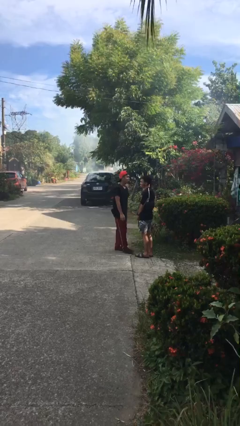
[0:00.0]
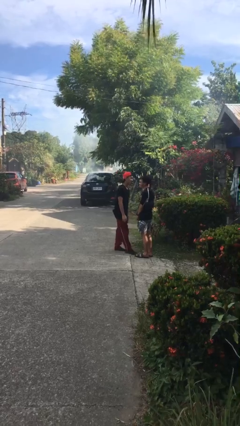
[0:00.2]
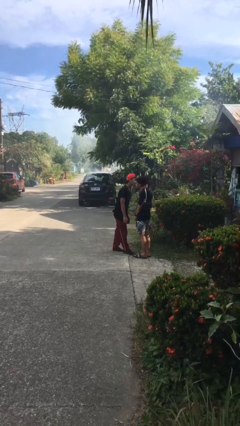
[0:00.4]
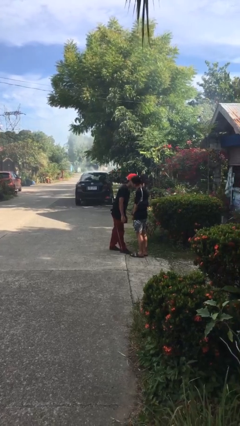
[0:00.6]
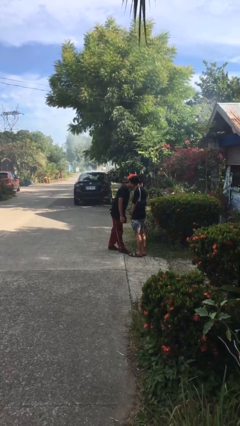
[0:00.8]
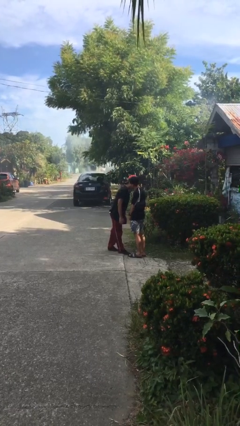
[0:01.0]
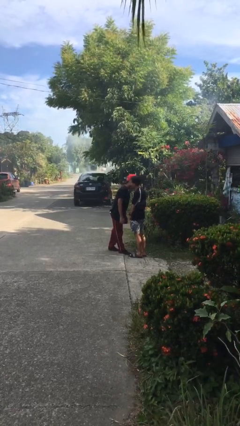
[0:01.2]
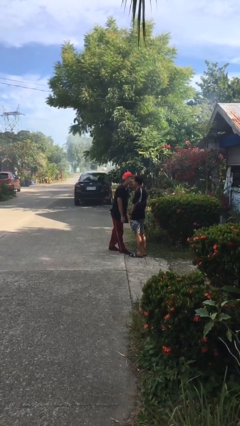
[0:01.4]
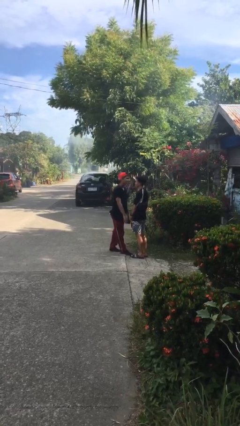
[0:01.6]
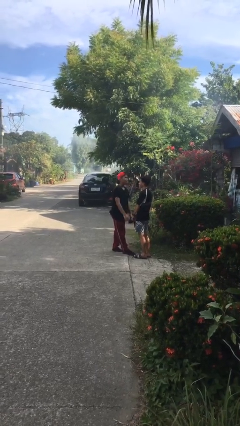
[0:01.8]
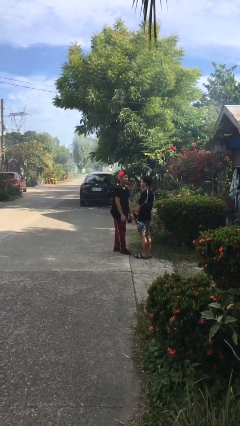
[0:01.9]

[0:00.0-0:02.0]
person kisses cheek of person

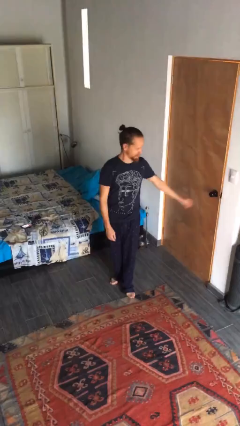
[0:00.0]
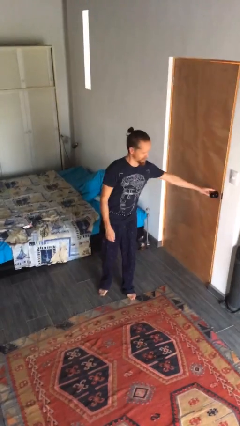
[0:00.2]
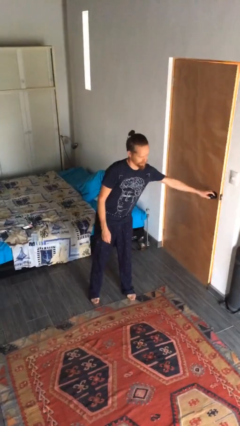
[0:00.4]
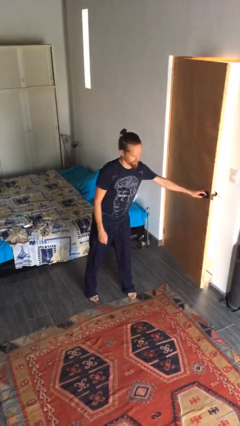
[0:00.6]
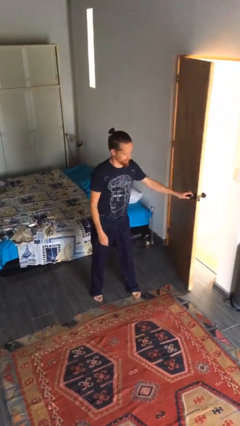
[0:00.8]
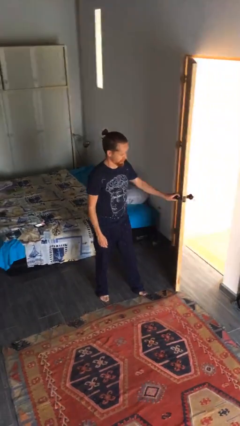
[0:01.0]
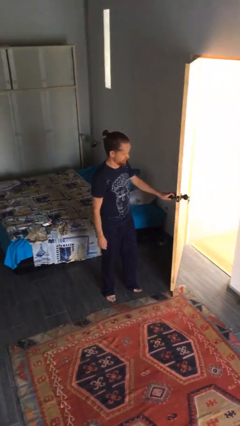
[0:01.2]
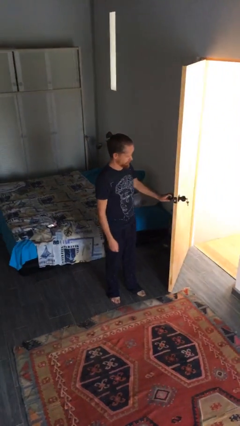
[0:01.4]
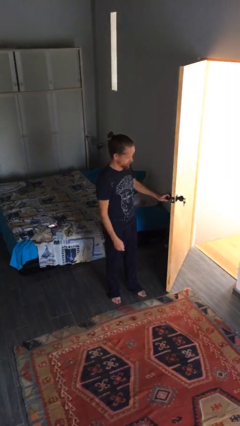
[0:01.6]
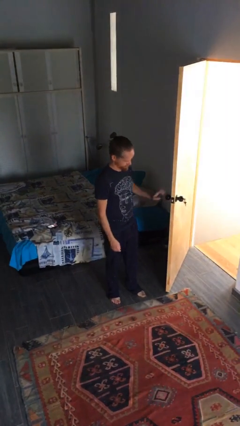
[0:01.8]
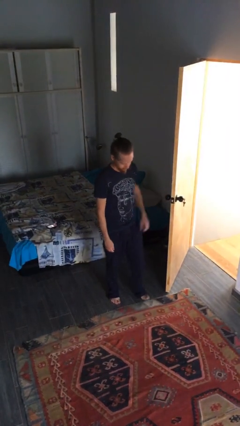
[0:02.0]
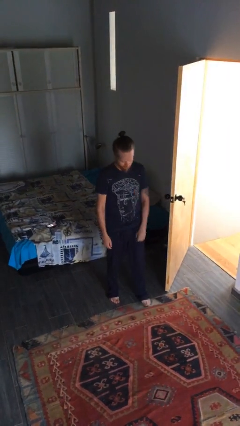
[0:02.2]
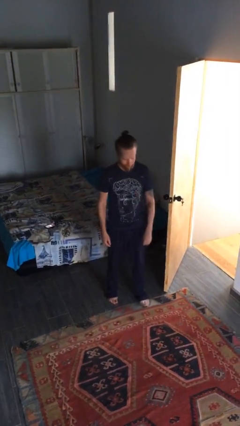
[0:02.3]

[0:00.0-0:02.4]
person opens facility door

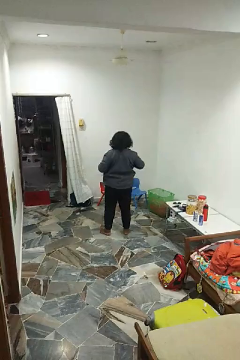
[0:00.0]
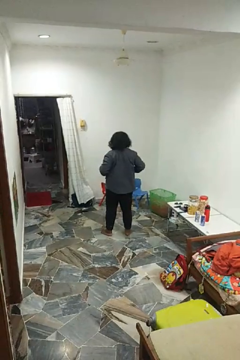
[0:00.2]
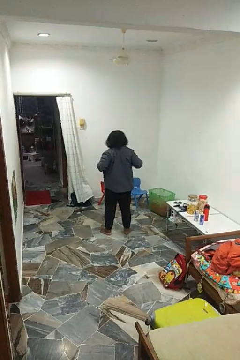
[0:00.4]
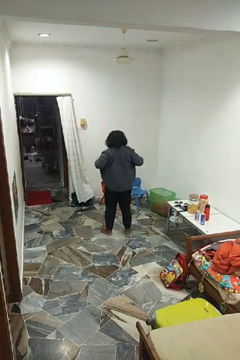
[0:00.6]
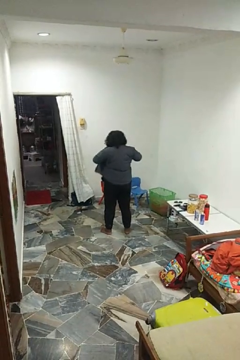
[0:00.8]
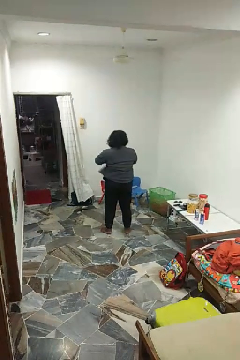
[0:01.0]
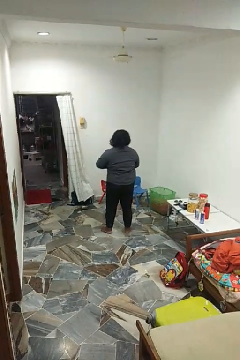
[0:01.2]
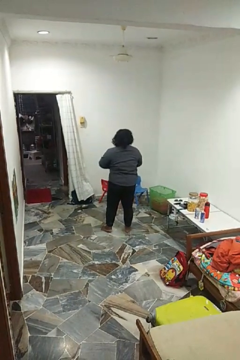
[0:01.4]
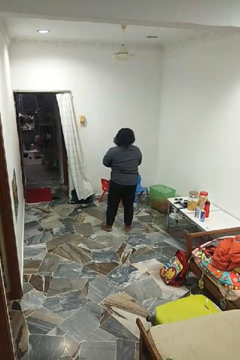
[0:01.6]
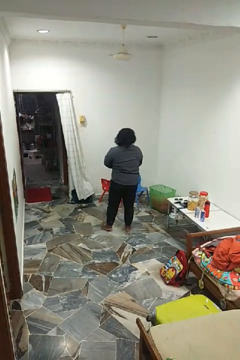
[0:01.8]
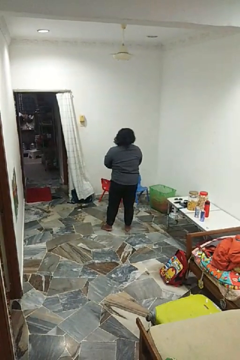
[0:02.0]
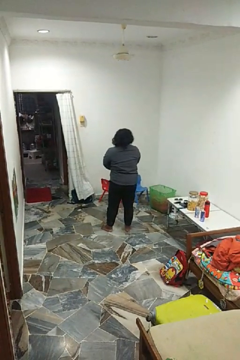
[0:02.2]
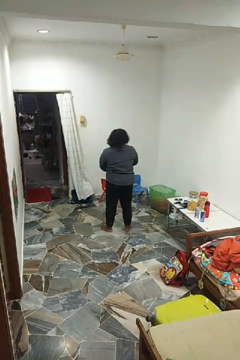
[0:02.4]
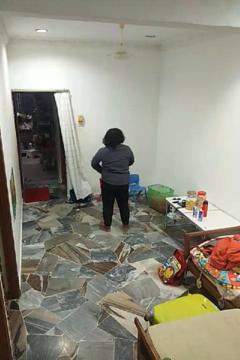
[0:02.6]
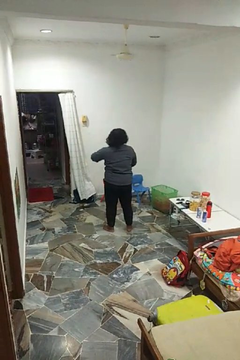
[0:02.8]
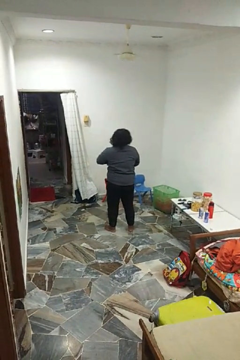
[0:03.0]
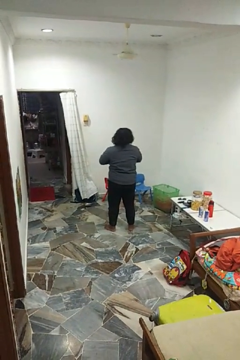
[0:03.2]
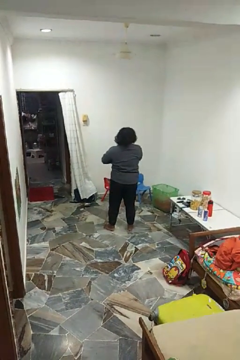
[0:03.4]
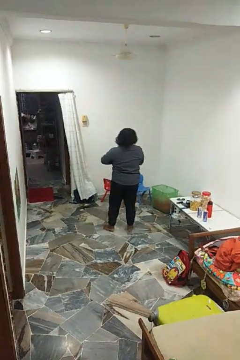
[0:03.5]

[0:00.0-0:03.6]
person buttons shirt

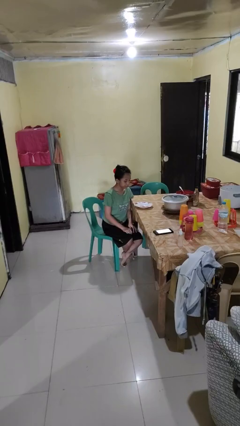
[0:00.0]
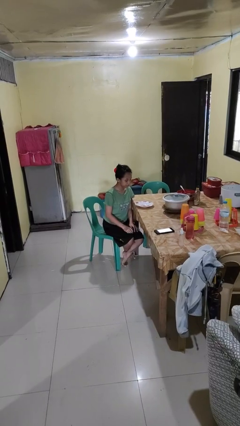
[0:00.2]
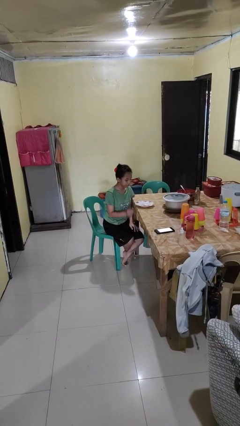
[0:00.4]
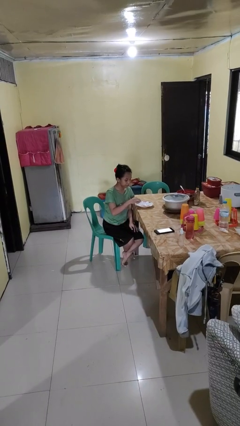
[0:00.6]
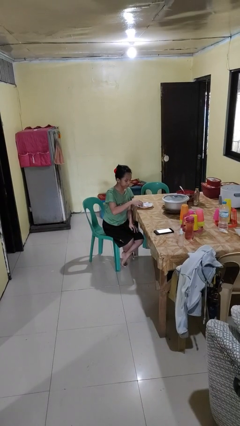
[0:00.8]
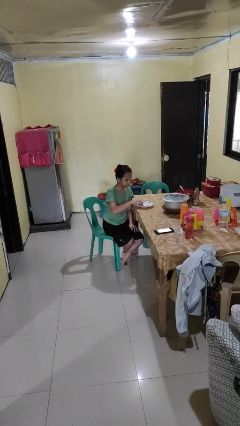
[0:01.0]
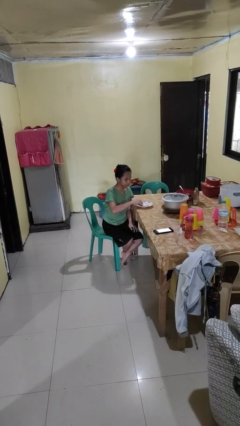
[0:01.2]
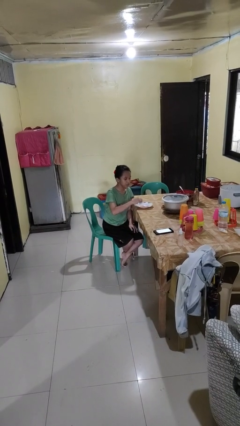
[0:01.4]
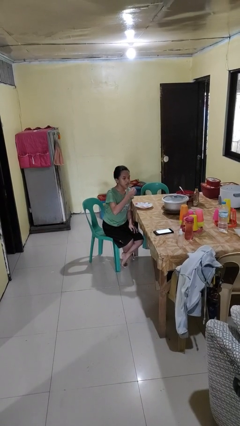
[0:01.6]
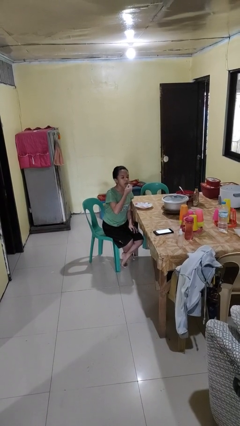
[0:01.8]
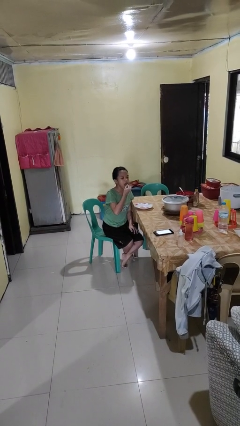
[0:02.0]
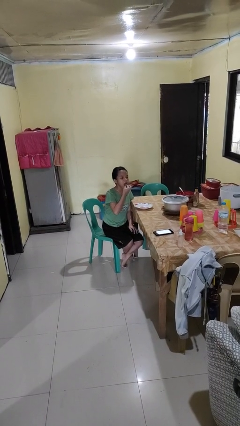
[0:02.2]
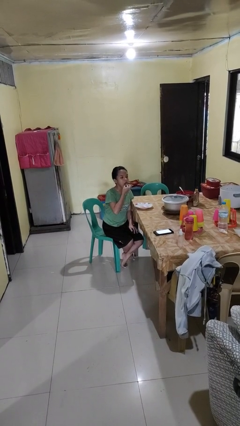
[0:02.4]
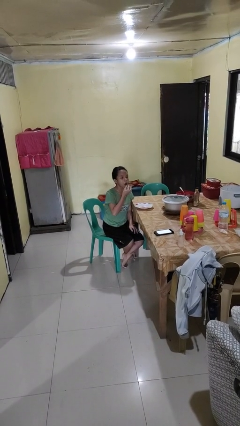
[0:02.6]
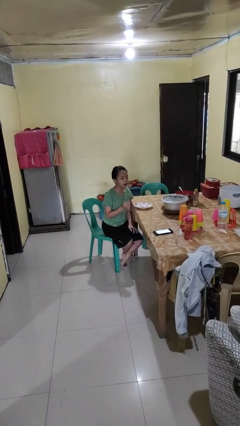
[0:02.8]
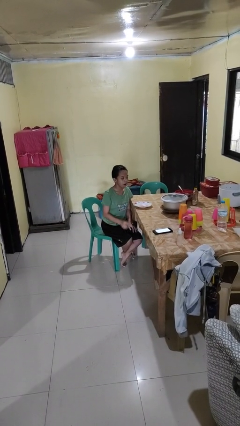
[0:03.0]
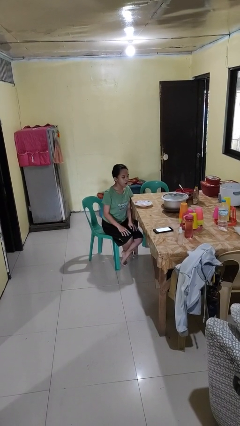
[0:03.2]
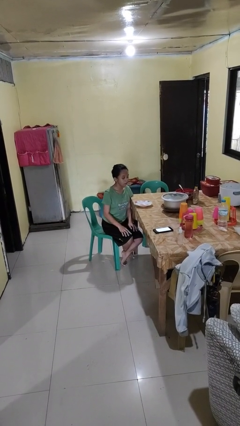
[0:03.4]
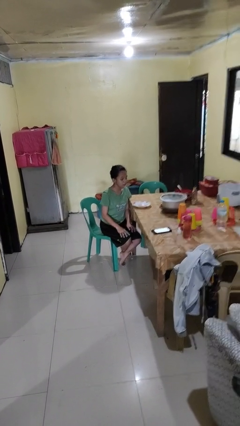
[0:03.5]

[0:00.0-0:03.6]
person eats with hands

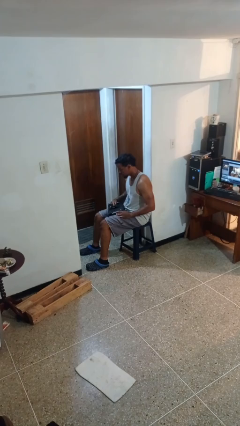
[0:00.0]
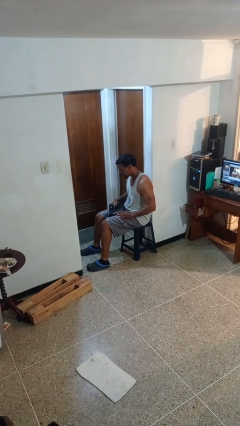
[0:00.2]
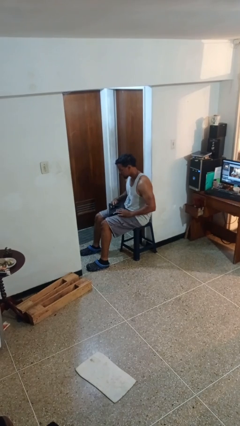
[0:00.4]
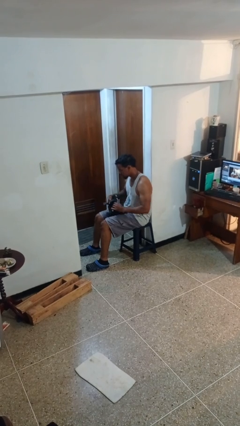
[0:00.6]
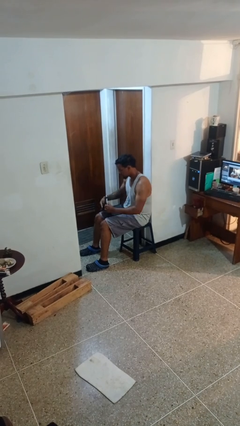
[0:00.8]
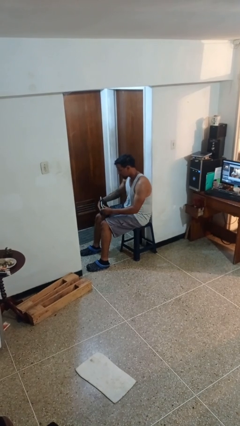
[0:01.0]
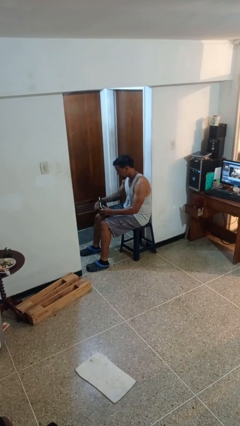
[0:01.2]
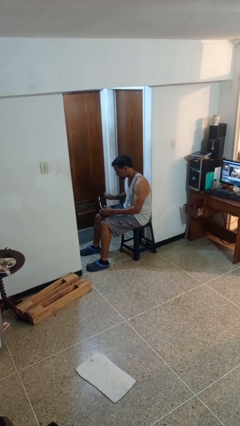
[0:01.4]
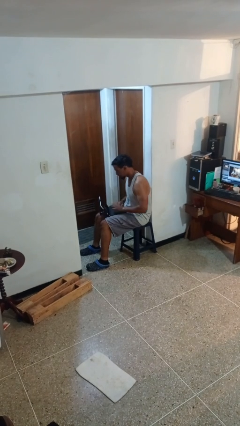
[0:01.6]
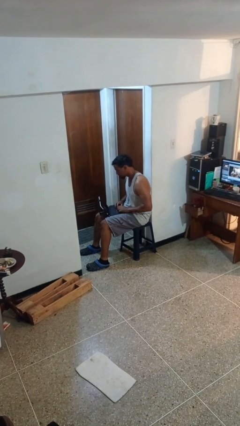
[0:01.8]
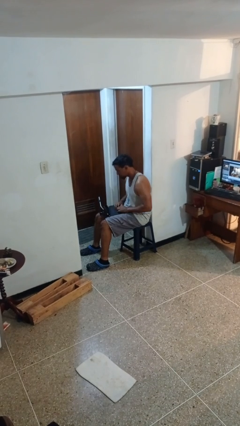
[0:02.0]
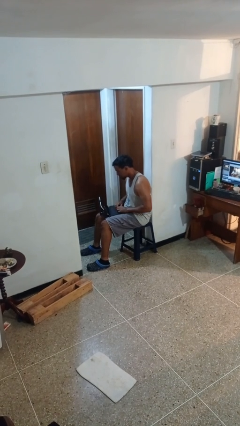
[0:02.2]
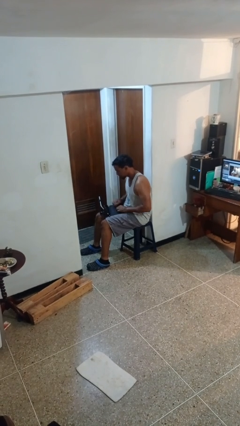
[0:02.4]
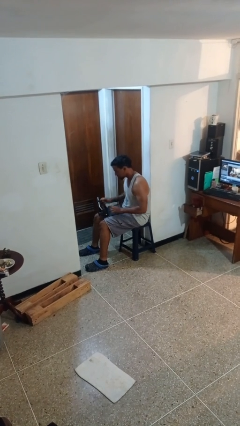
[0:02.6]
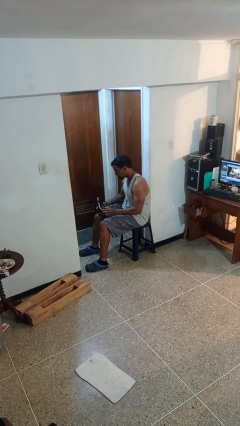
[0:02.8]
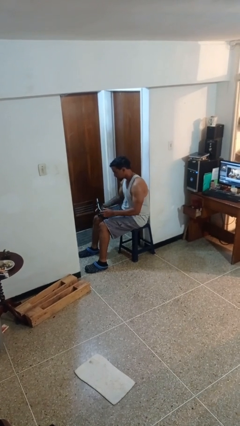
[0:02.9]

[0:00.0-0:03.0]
person opens laptop

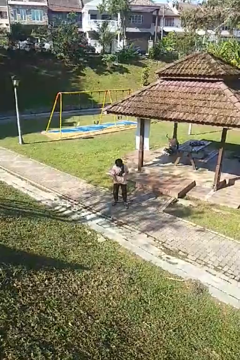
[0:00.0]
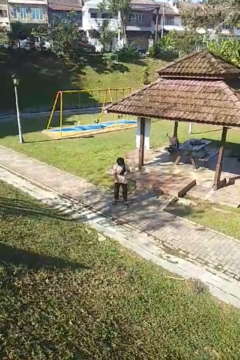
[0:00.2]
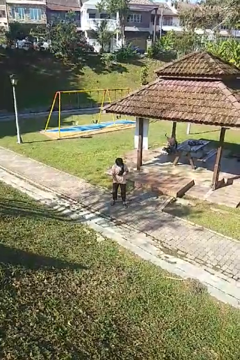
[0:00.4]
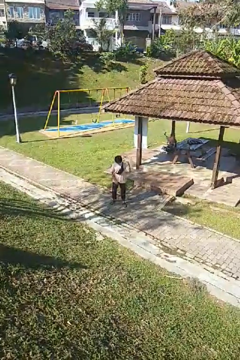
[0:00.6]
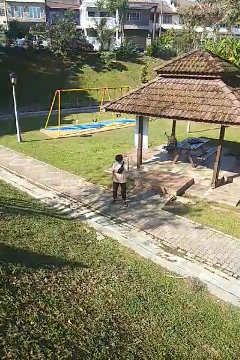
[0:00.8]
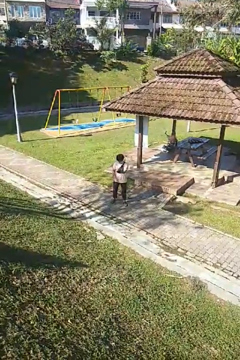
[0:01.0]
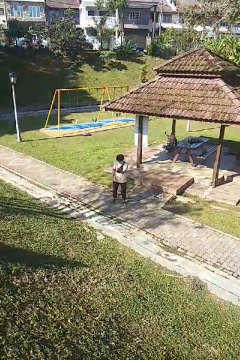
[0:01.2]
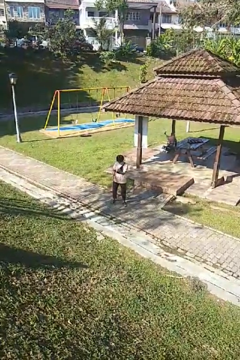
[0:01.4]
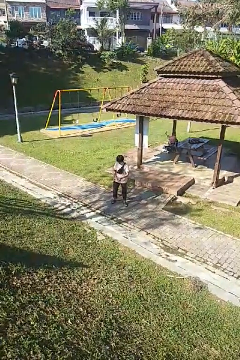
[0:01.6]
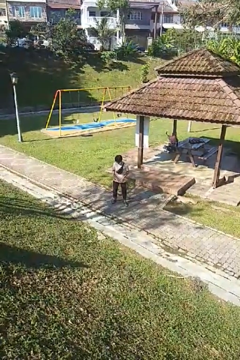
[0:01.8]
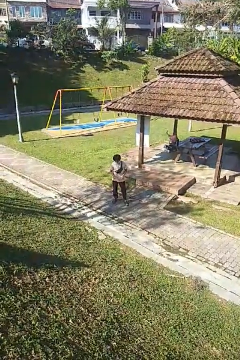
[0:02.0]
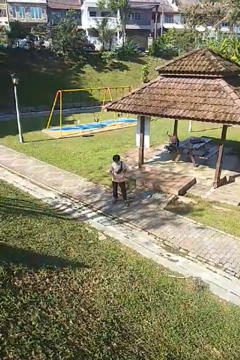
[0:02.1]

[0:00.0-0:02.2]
person karate chop

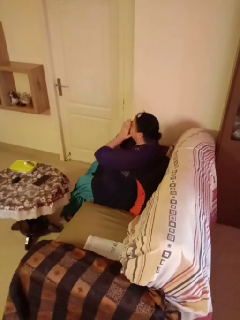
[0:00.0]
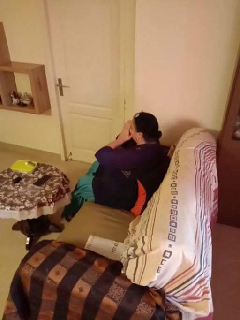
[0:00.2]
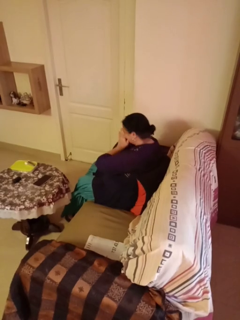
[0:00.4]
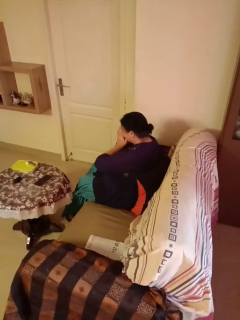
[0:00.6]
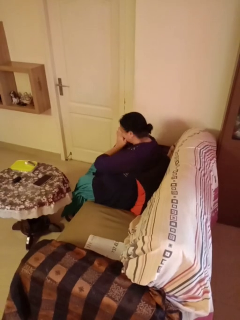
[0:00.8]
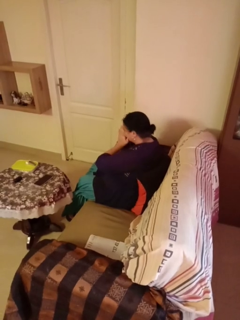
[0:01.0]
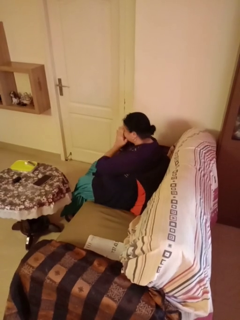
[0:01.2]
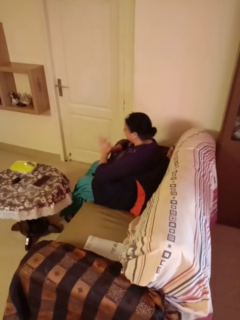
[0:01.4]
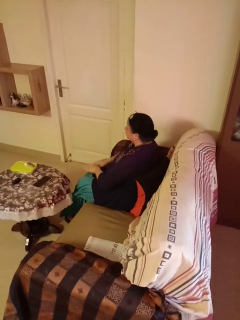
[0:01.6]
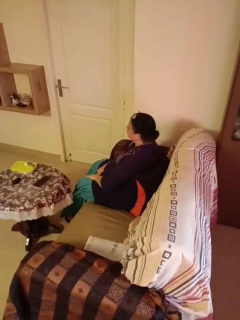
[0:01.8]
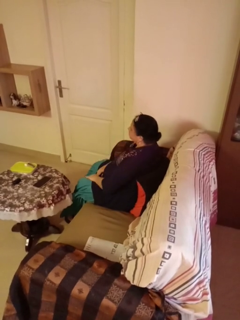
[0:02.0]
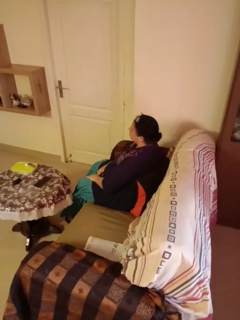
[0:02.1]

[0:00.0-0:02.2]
person sneezes into hand
